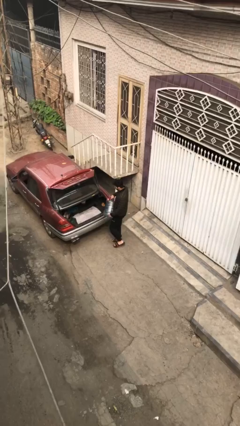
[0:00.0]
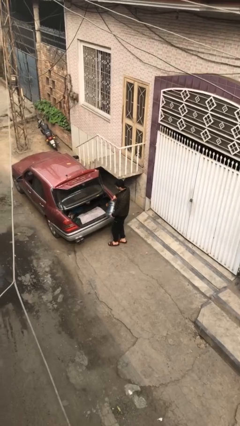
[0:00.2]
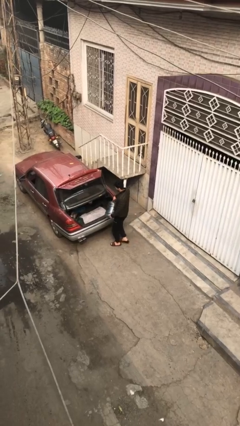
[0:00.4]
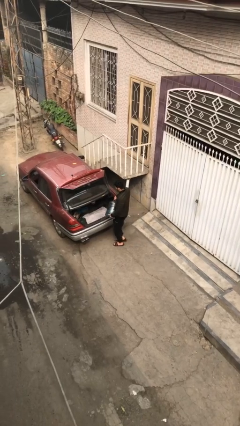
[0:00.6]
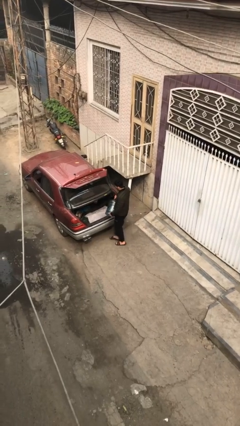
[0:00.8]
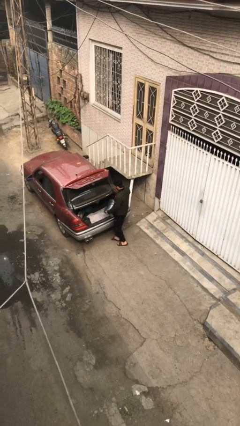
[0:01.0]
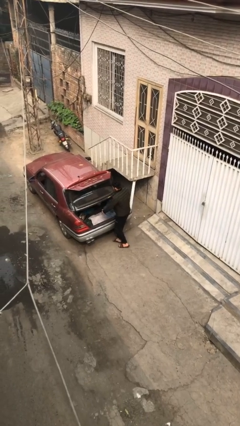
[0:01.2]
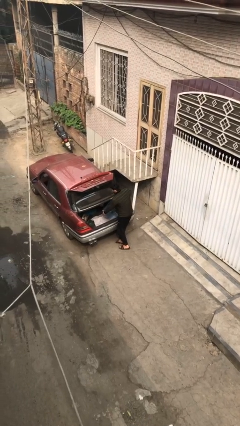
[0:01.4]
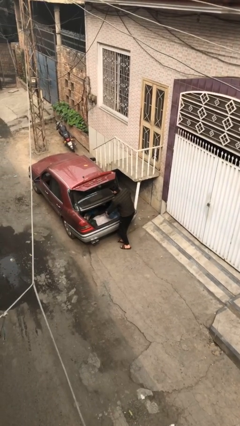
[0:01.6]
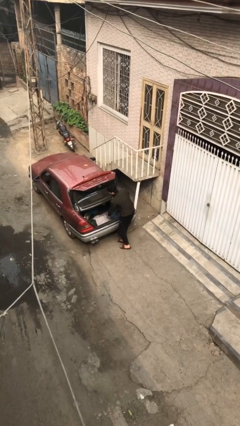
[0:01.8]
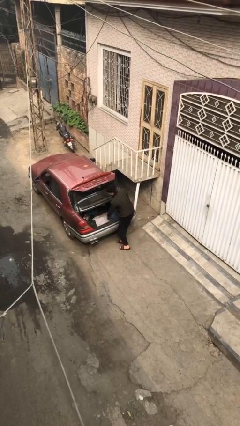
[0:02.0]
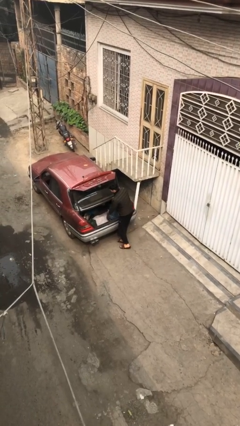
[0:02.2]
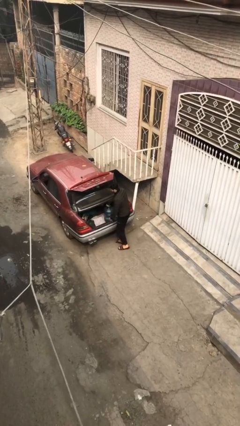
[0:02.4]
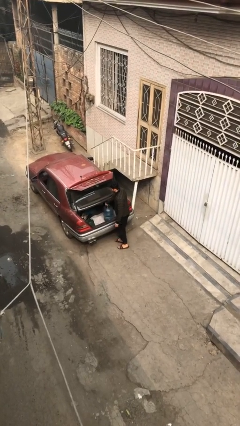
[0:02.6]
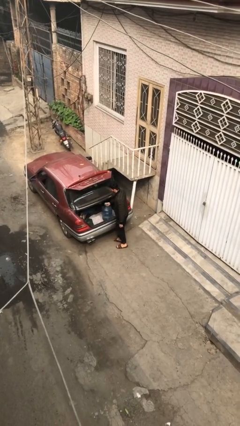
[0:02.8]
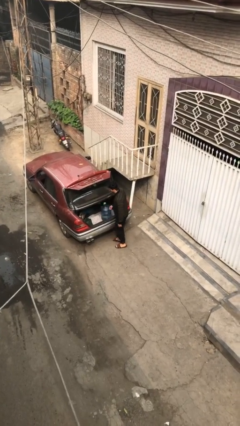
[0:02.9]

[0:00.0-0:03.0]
person loads car

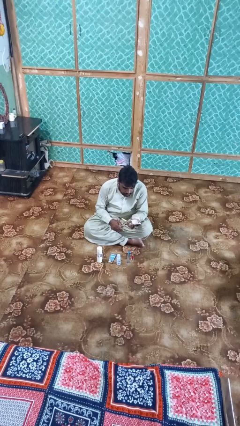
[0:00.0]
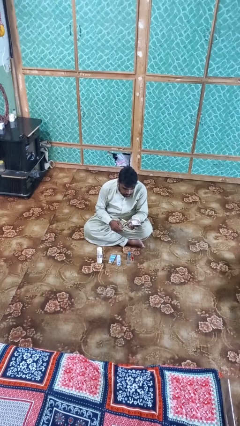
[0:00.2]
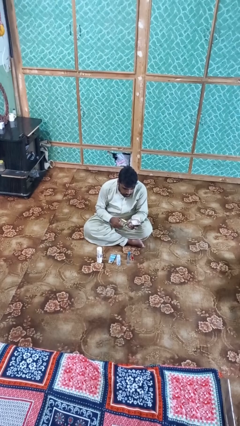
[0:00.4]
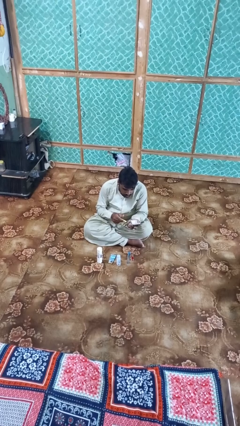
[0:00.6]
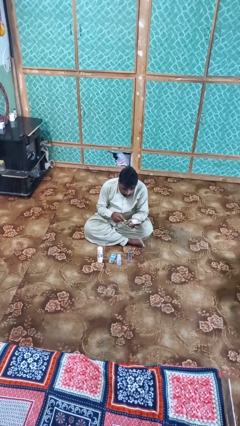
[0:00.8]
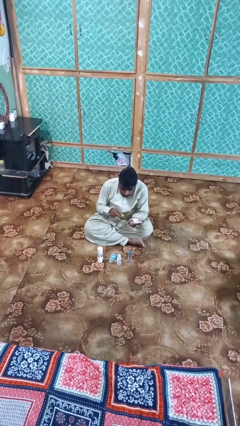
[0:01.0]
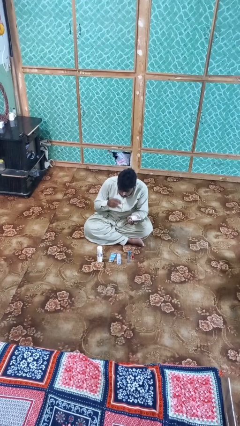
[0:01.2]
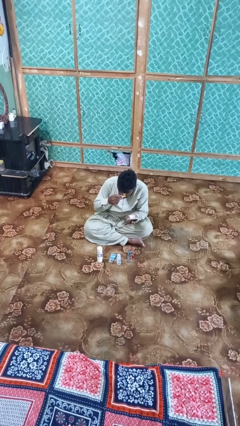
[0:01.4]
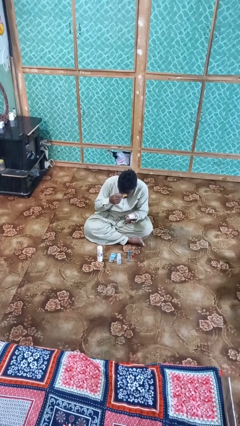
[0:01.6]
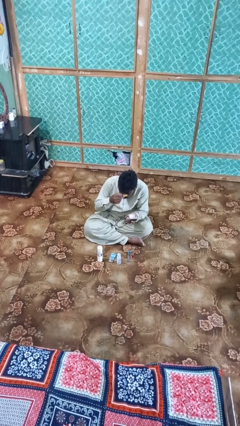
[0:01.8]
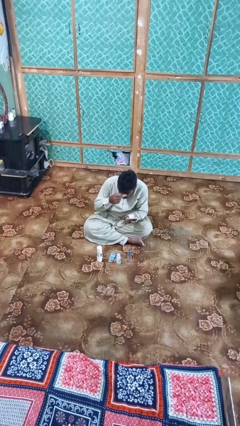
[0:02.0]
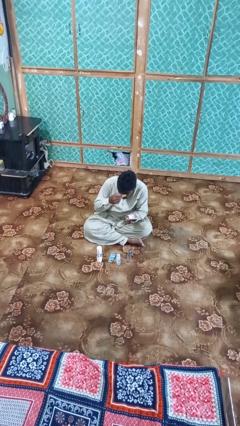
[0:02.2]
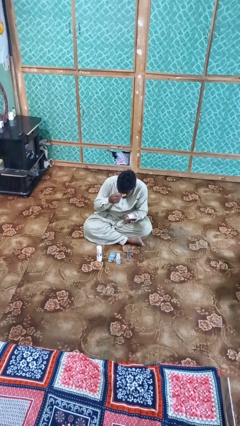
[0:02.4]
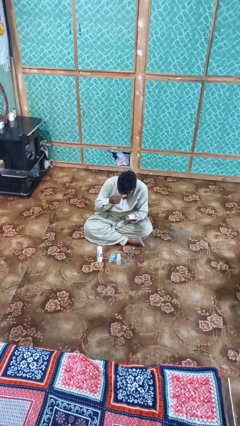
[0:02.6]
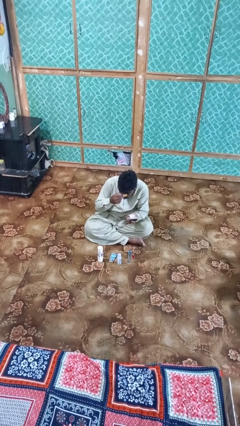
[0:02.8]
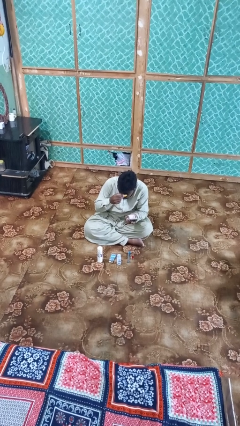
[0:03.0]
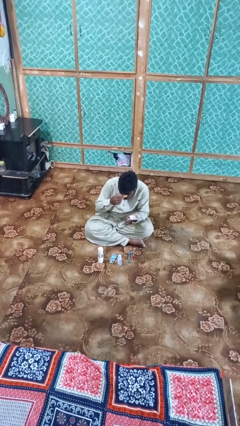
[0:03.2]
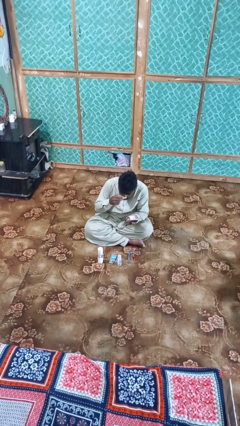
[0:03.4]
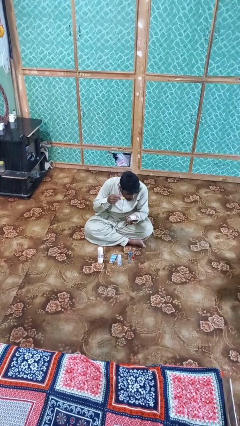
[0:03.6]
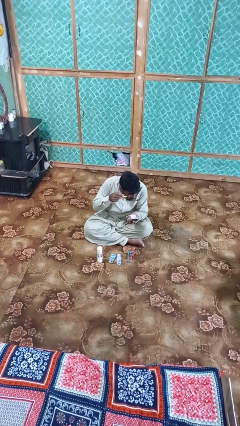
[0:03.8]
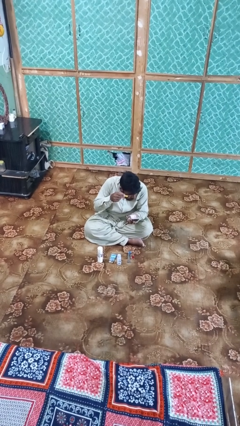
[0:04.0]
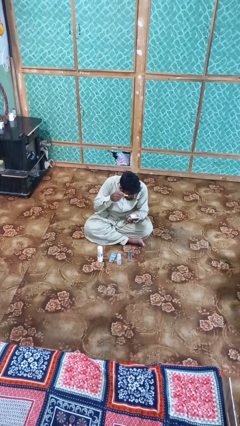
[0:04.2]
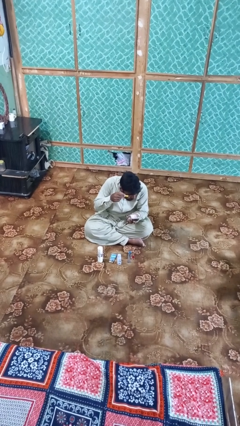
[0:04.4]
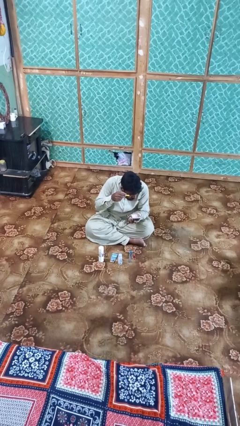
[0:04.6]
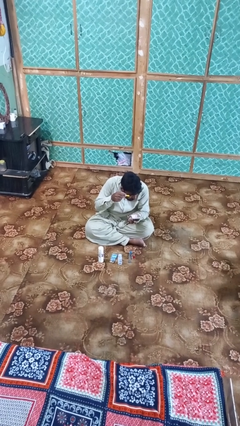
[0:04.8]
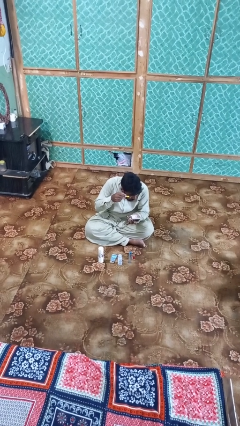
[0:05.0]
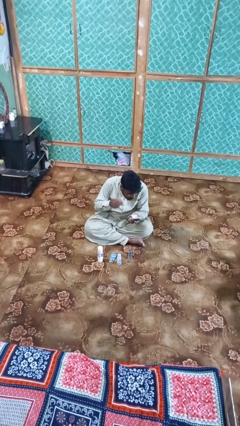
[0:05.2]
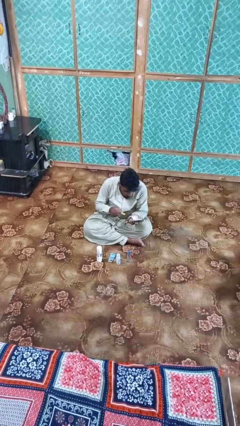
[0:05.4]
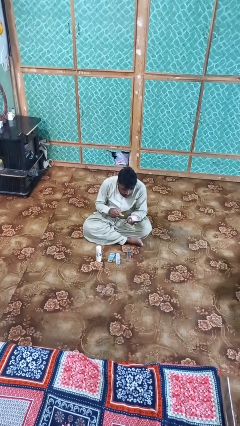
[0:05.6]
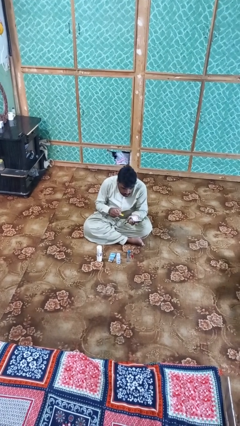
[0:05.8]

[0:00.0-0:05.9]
person applies eye makeup

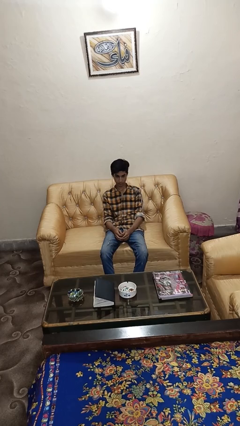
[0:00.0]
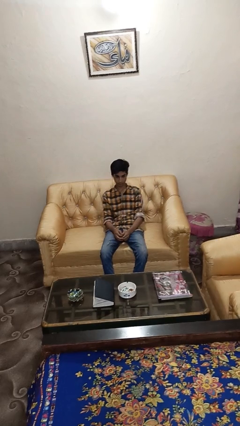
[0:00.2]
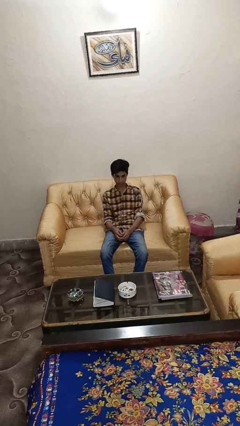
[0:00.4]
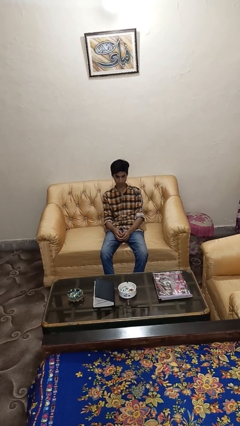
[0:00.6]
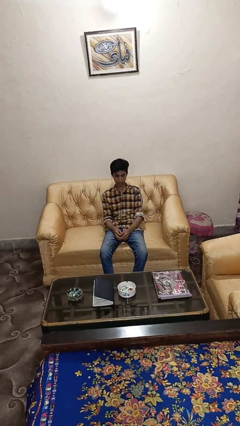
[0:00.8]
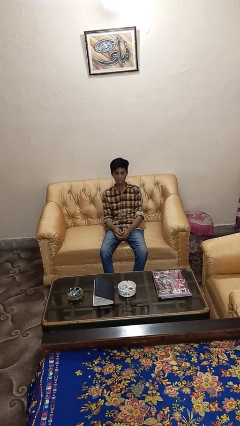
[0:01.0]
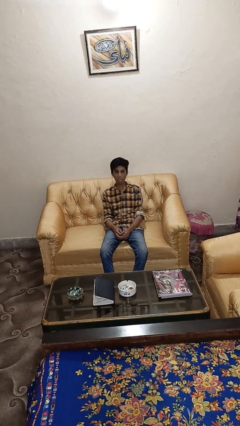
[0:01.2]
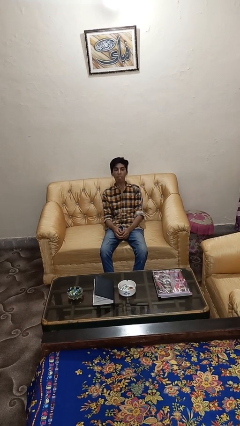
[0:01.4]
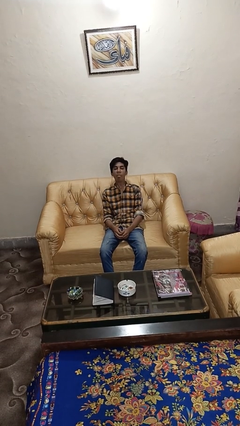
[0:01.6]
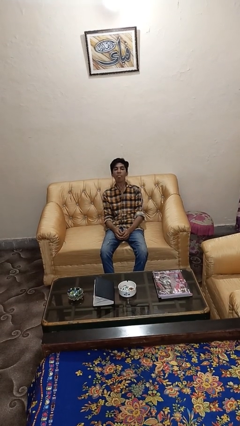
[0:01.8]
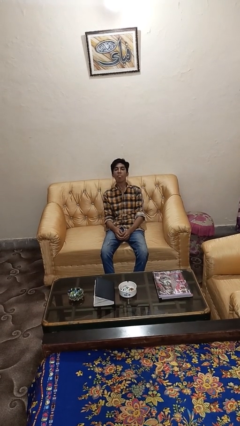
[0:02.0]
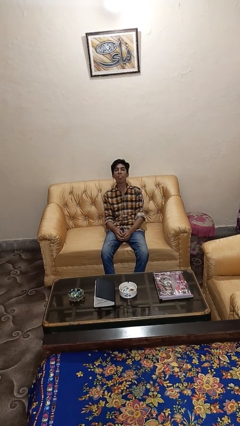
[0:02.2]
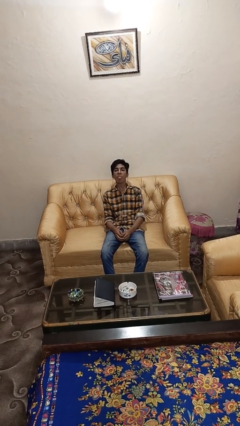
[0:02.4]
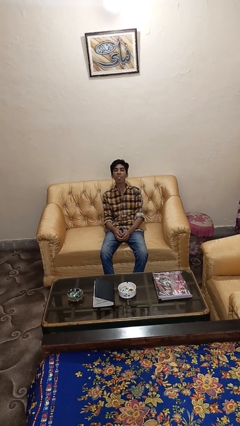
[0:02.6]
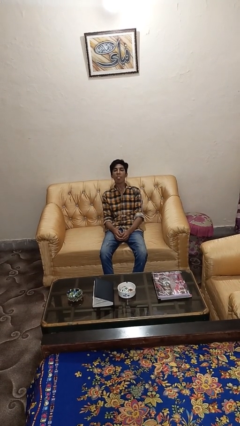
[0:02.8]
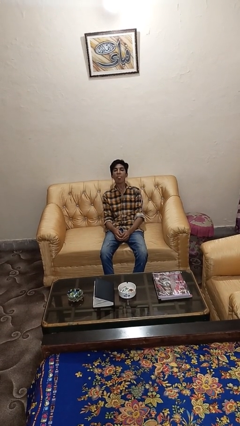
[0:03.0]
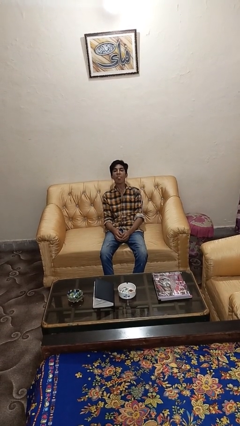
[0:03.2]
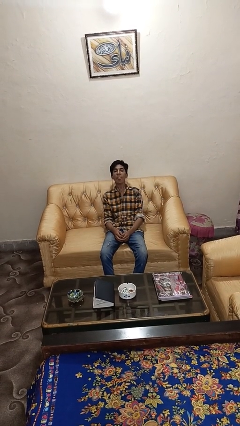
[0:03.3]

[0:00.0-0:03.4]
person sticks out tongue

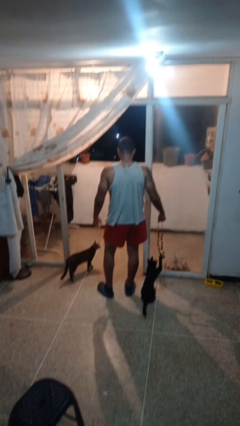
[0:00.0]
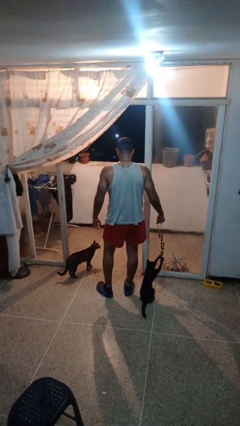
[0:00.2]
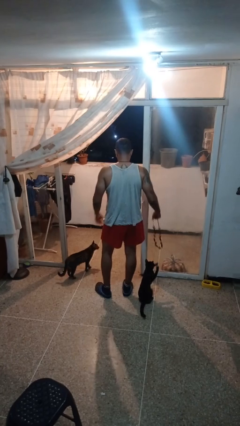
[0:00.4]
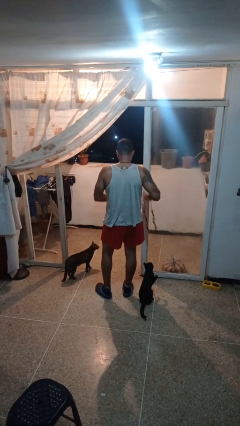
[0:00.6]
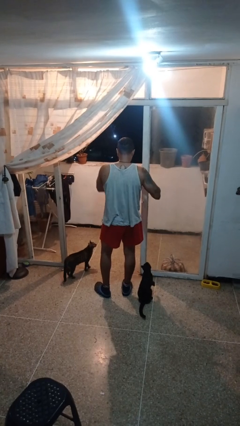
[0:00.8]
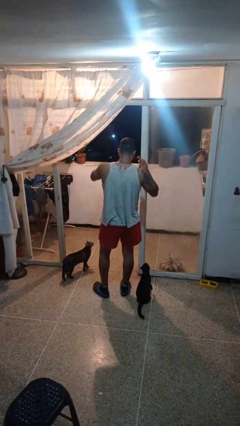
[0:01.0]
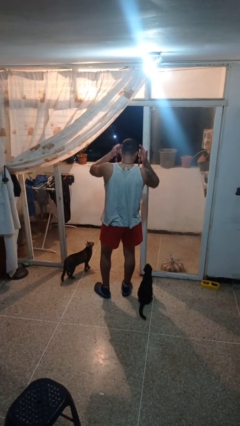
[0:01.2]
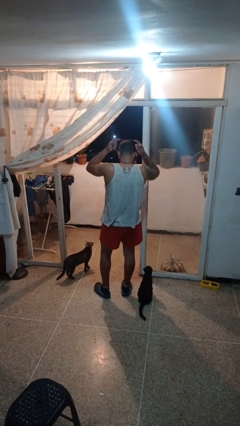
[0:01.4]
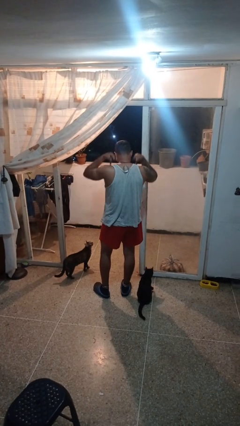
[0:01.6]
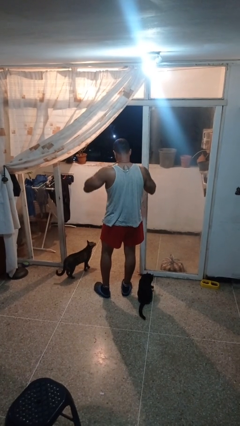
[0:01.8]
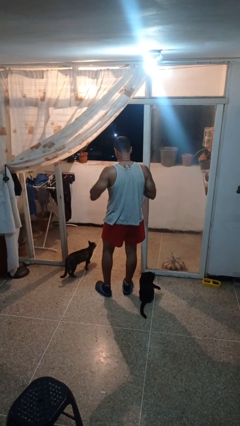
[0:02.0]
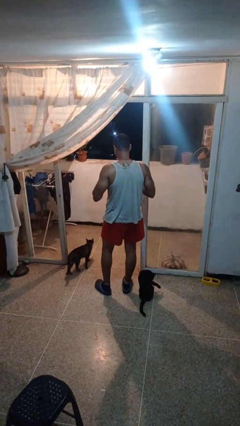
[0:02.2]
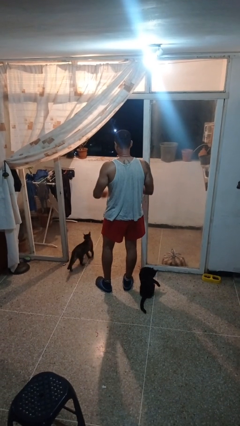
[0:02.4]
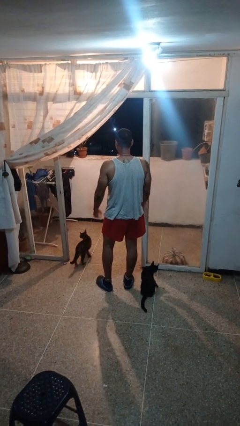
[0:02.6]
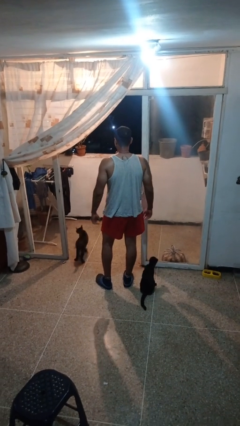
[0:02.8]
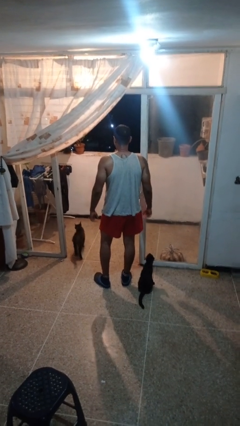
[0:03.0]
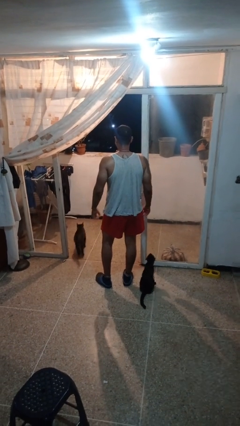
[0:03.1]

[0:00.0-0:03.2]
person puts on necklace

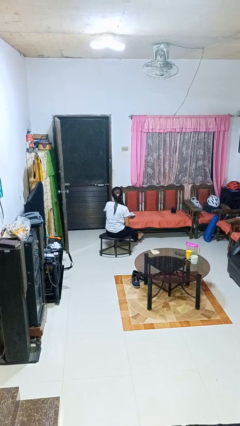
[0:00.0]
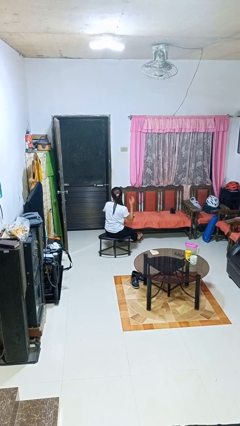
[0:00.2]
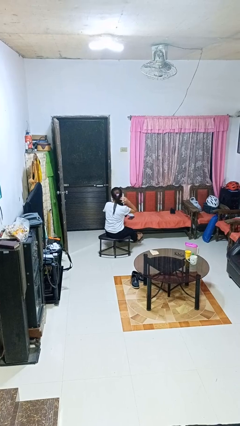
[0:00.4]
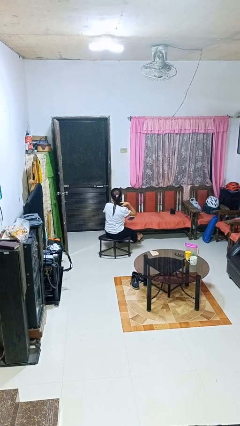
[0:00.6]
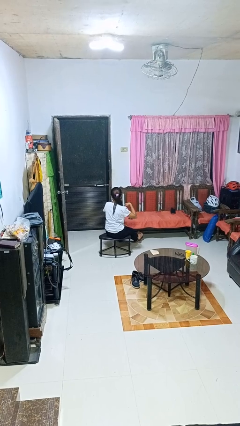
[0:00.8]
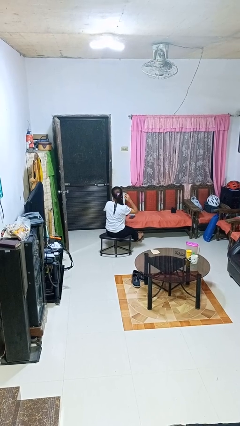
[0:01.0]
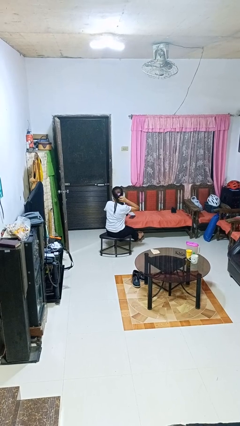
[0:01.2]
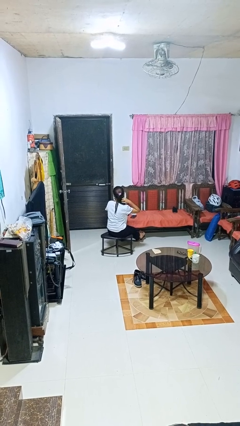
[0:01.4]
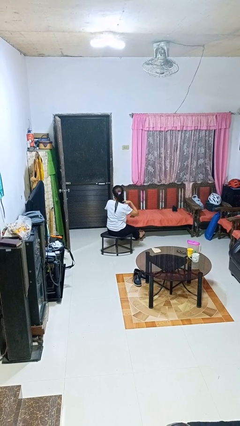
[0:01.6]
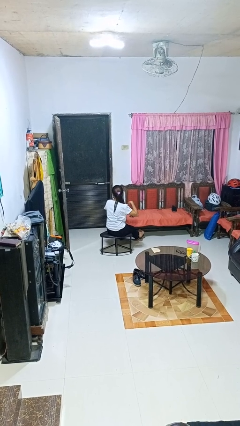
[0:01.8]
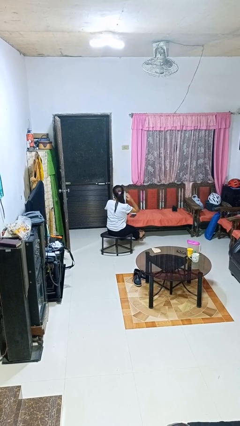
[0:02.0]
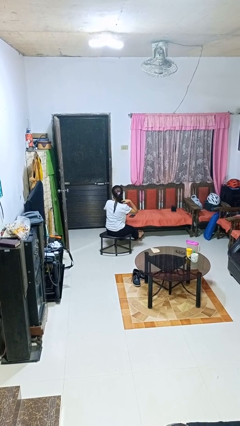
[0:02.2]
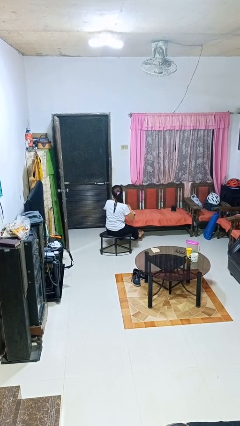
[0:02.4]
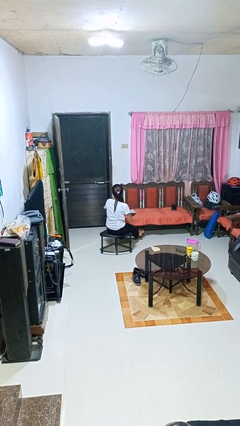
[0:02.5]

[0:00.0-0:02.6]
person strokes hair
